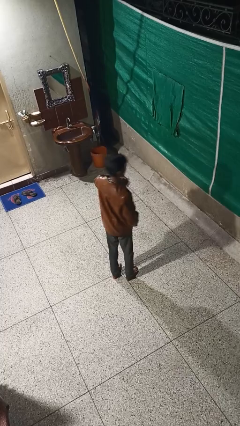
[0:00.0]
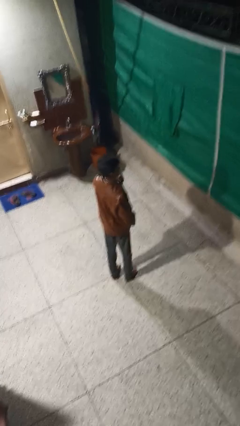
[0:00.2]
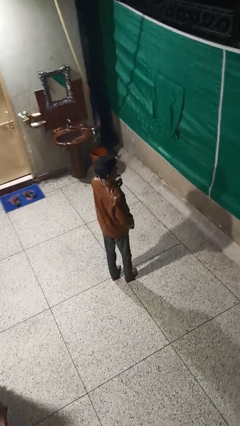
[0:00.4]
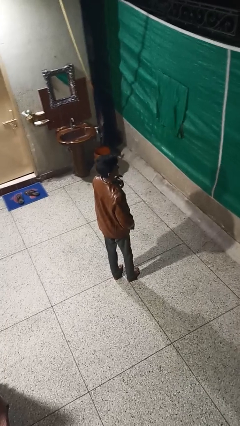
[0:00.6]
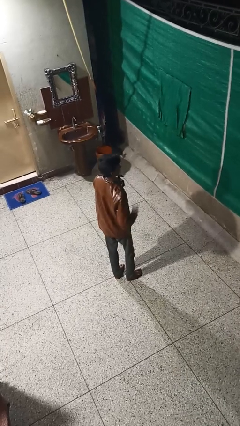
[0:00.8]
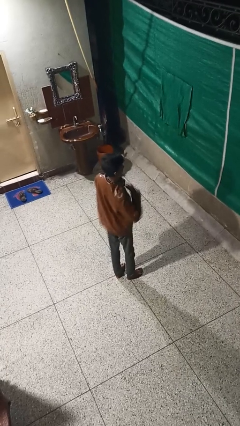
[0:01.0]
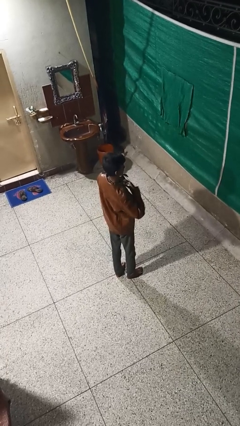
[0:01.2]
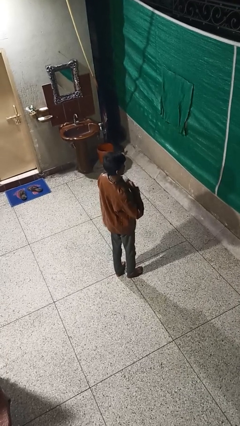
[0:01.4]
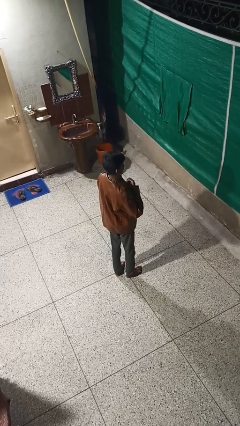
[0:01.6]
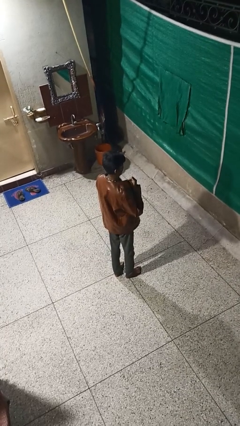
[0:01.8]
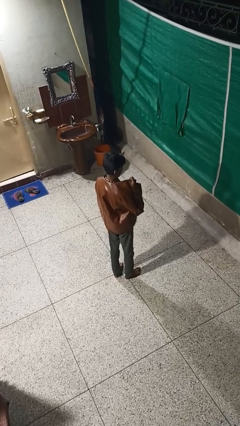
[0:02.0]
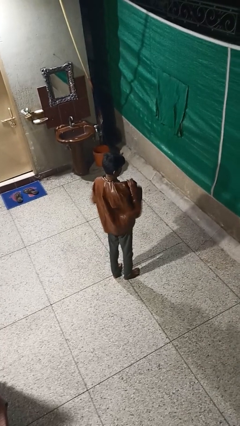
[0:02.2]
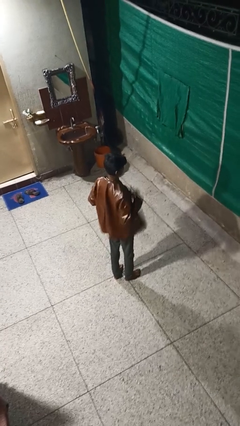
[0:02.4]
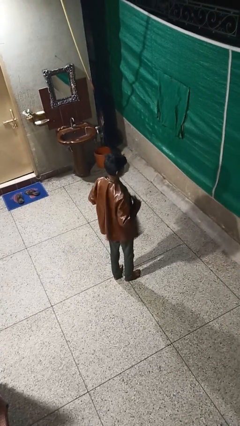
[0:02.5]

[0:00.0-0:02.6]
person unzips jacket

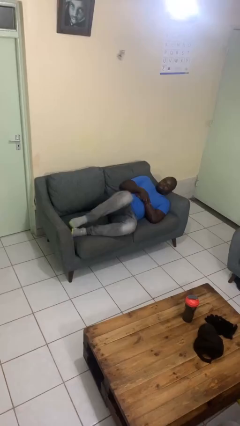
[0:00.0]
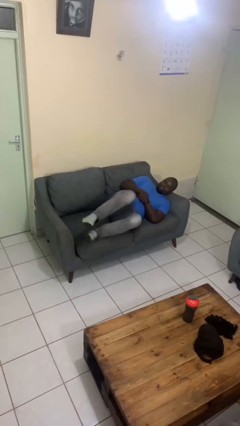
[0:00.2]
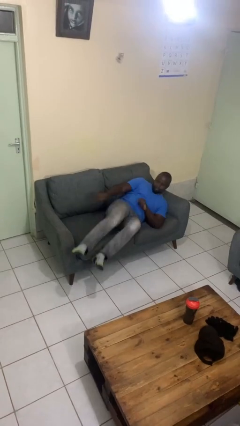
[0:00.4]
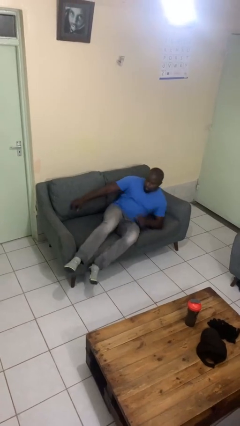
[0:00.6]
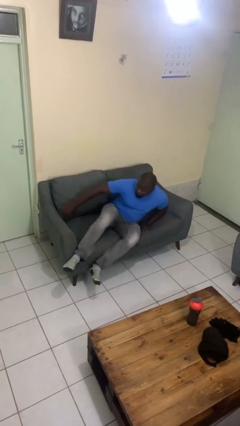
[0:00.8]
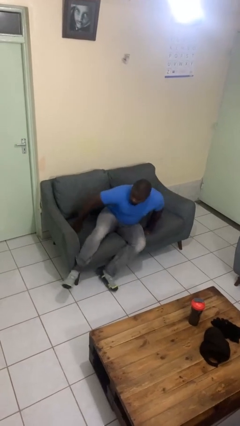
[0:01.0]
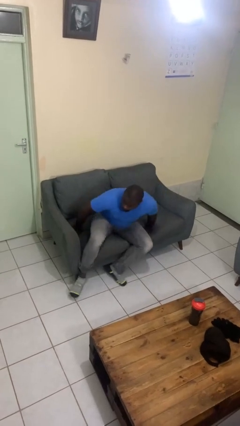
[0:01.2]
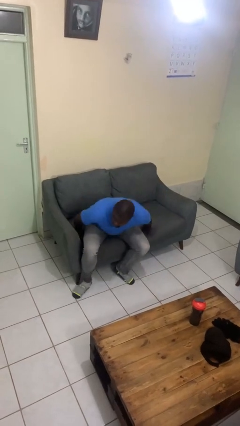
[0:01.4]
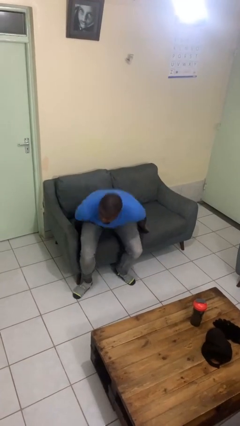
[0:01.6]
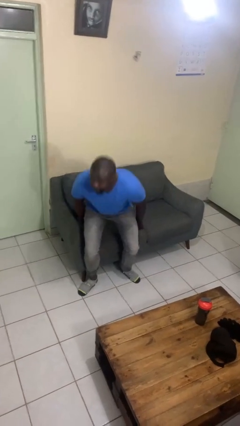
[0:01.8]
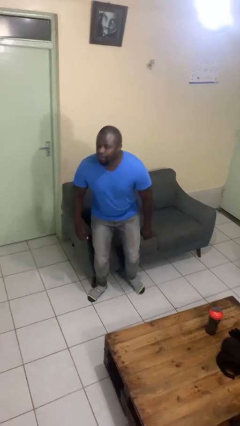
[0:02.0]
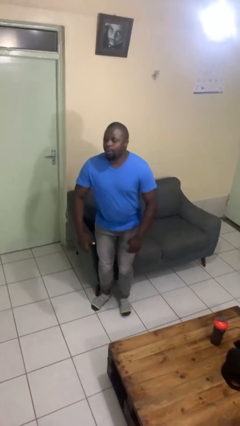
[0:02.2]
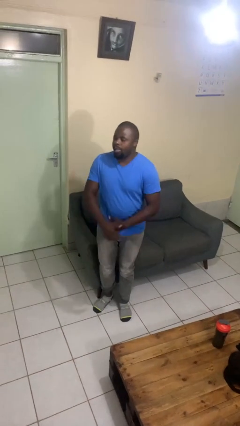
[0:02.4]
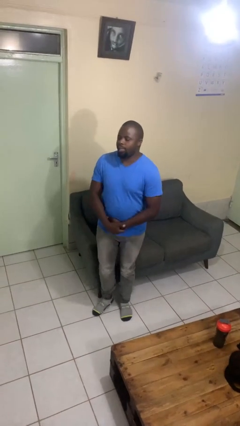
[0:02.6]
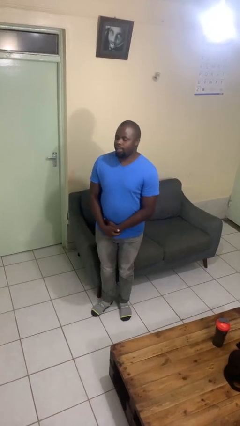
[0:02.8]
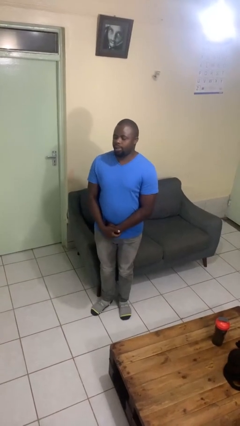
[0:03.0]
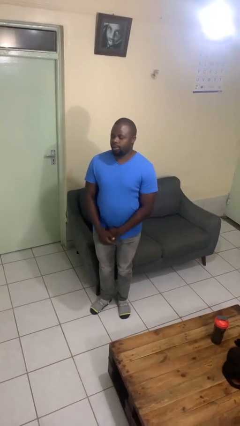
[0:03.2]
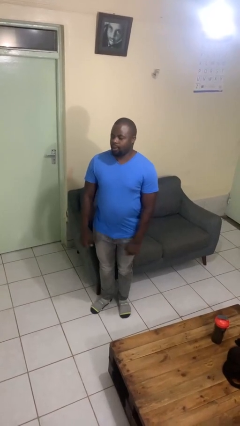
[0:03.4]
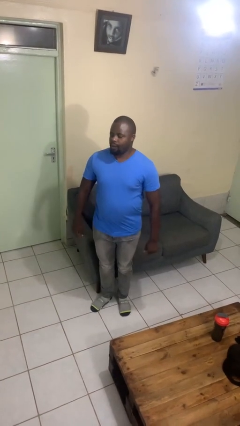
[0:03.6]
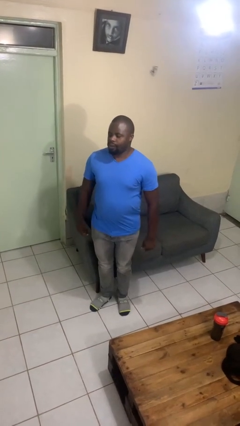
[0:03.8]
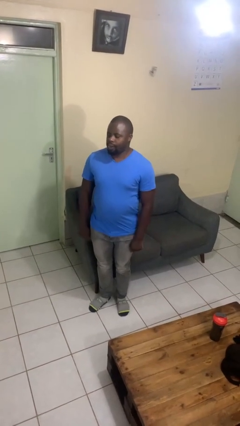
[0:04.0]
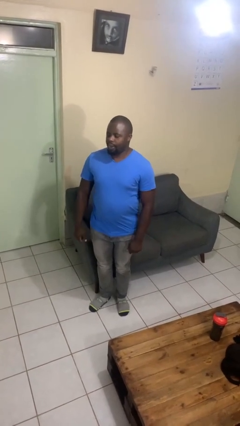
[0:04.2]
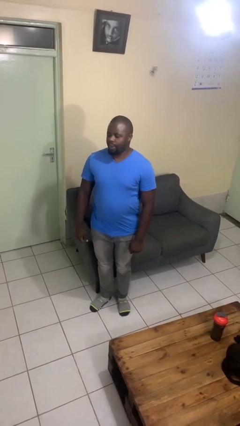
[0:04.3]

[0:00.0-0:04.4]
person stands up

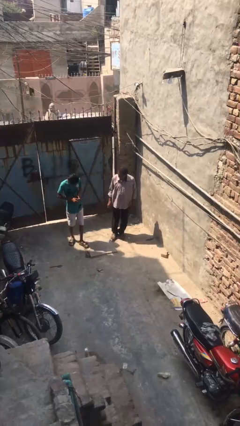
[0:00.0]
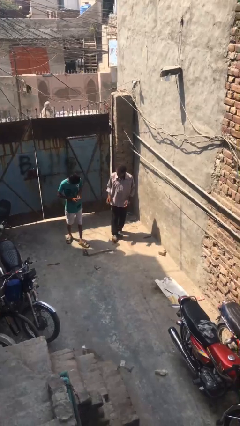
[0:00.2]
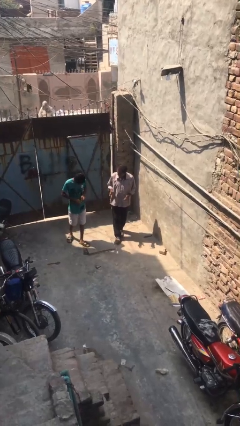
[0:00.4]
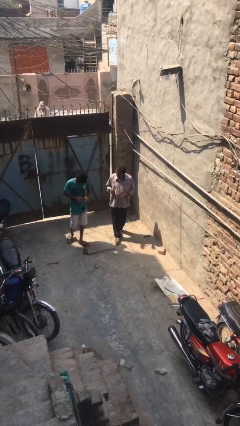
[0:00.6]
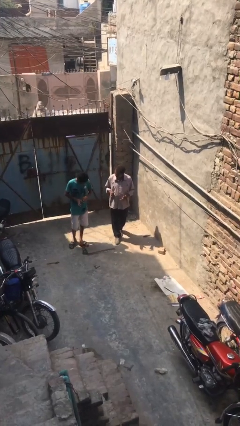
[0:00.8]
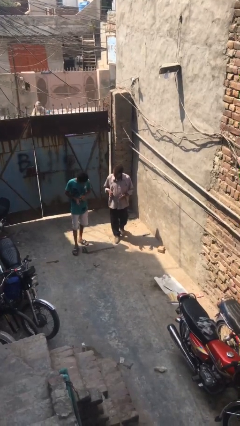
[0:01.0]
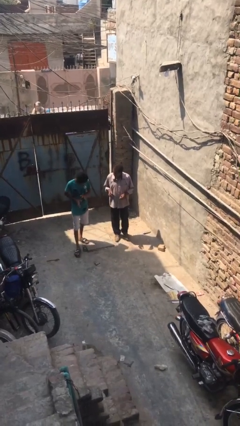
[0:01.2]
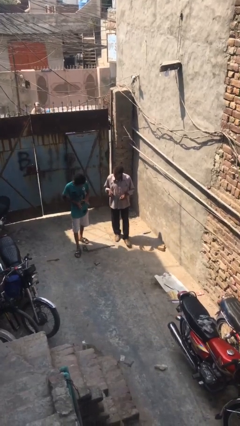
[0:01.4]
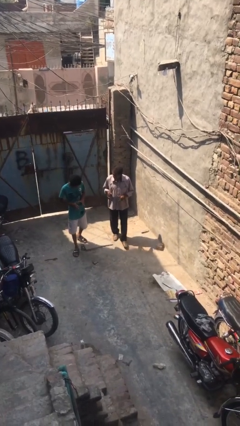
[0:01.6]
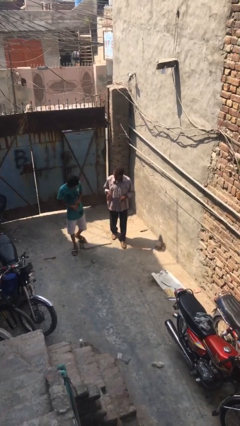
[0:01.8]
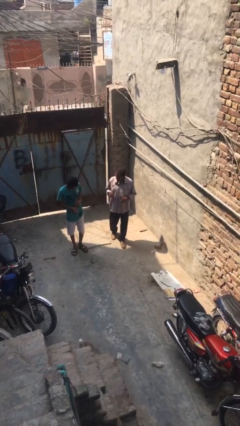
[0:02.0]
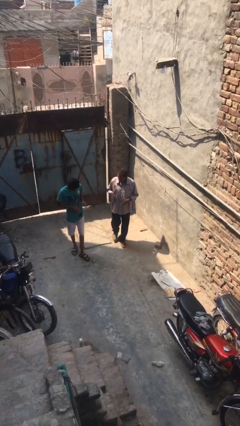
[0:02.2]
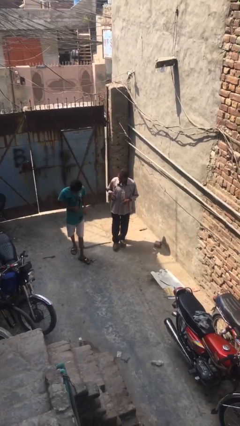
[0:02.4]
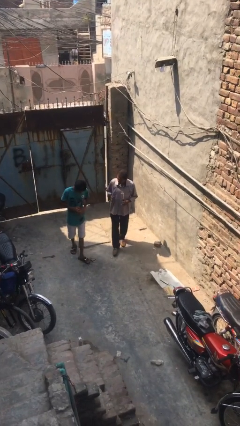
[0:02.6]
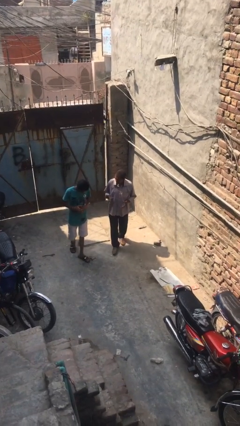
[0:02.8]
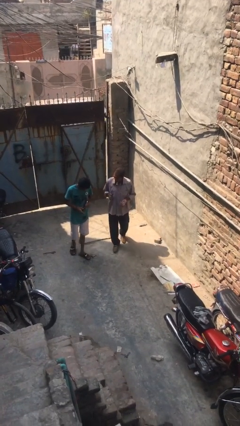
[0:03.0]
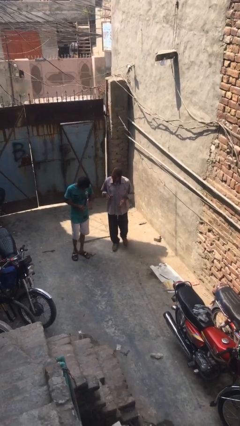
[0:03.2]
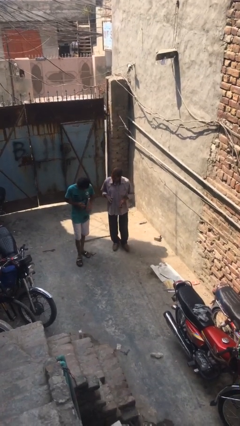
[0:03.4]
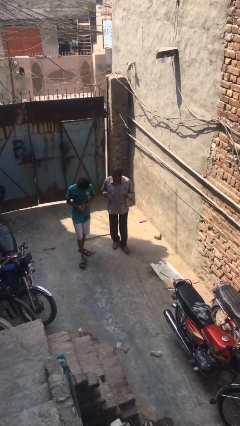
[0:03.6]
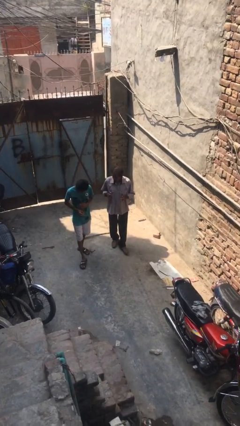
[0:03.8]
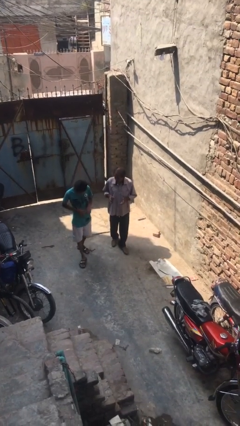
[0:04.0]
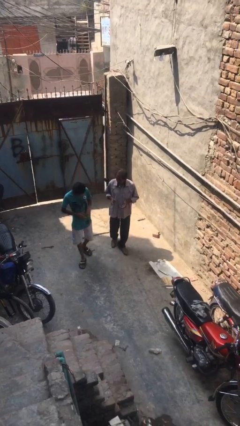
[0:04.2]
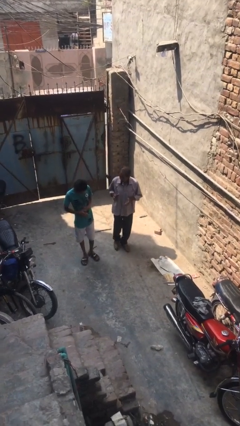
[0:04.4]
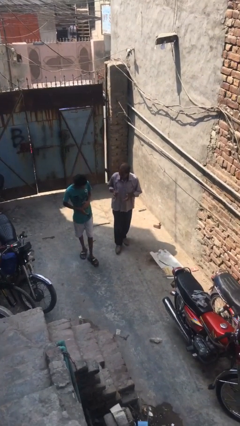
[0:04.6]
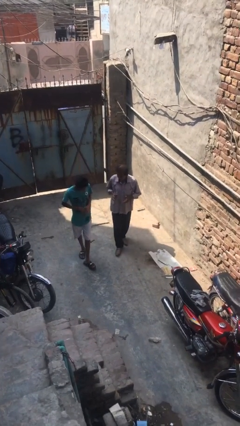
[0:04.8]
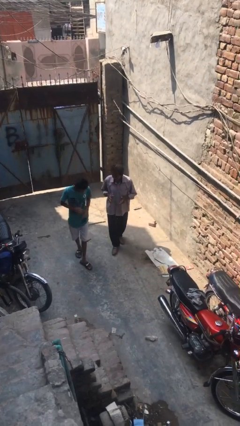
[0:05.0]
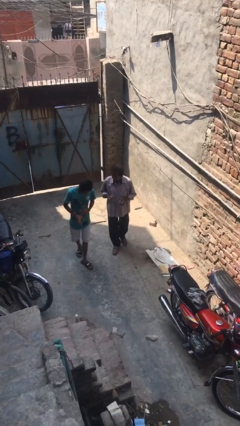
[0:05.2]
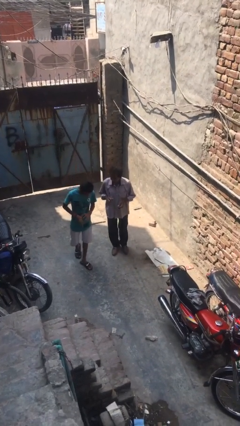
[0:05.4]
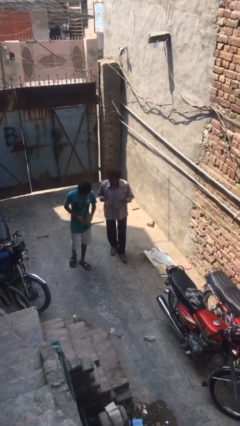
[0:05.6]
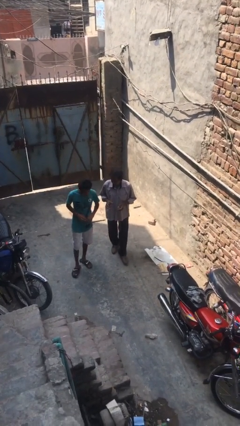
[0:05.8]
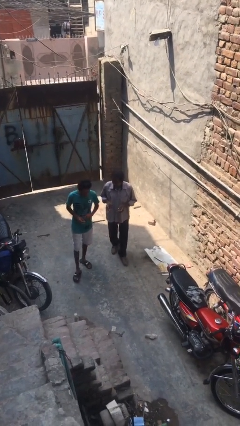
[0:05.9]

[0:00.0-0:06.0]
person talks to person

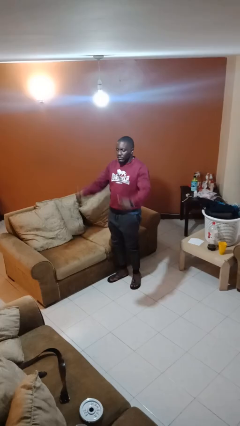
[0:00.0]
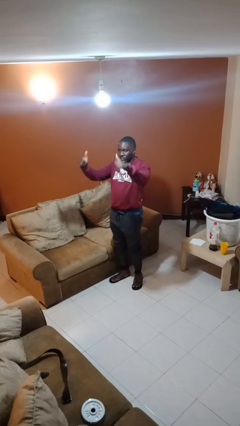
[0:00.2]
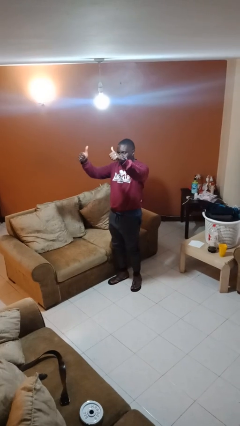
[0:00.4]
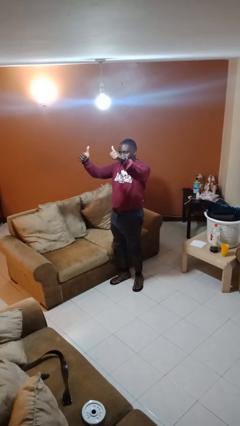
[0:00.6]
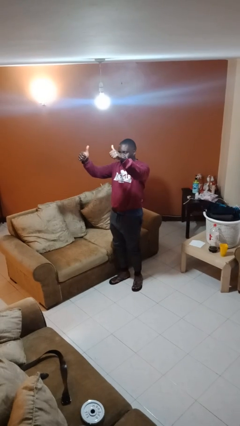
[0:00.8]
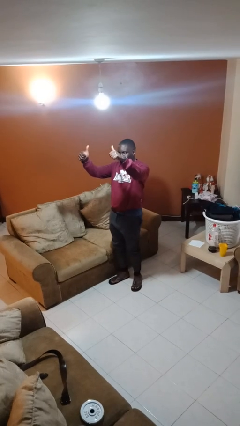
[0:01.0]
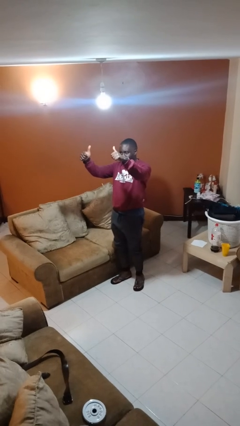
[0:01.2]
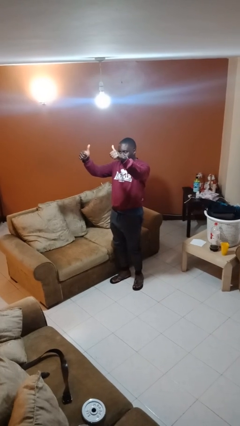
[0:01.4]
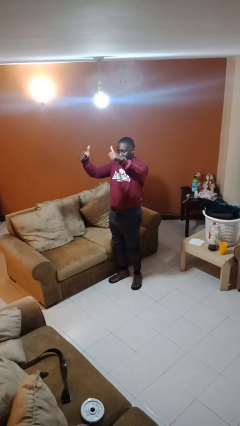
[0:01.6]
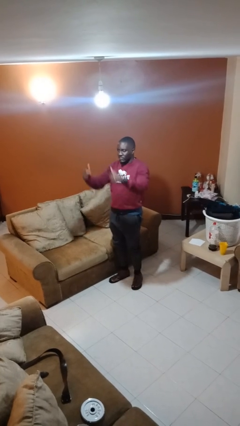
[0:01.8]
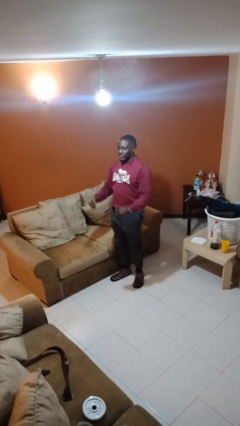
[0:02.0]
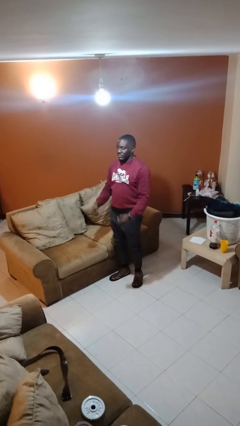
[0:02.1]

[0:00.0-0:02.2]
person gestures thumbs up

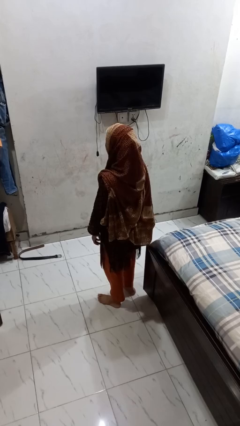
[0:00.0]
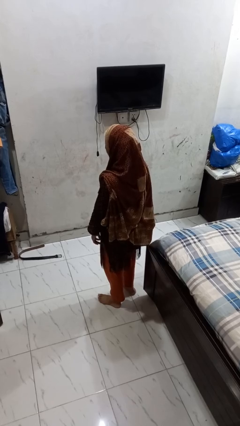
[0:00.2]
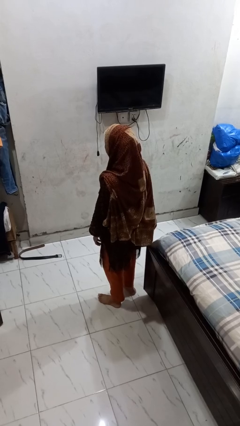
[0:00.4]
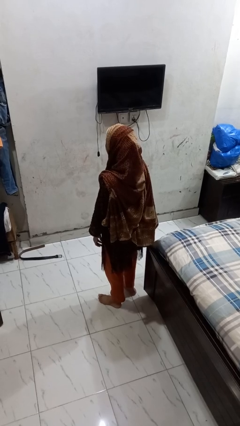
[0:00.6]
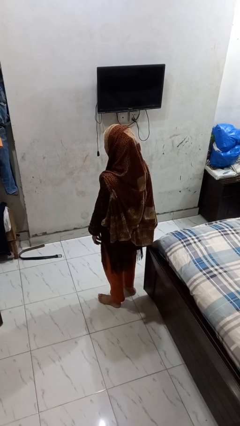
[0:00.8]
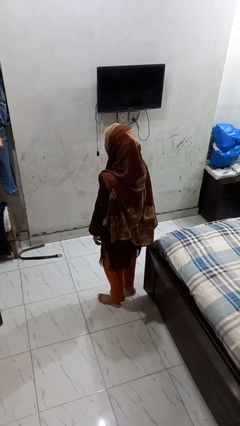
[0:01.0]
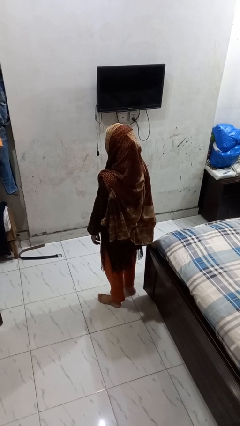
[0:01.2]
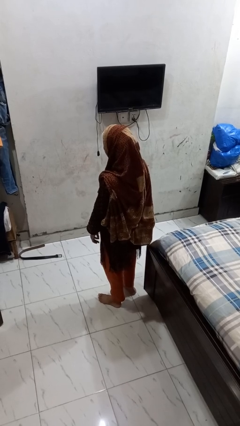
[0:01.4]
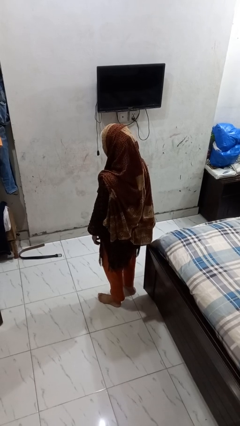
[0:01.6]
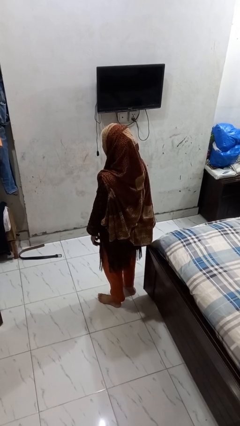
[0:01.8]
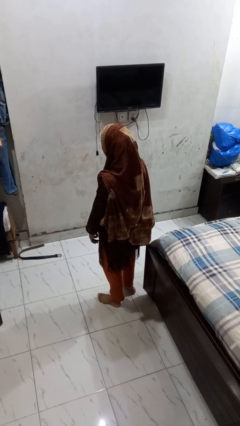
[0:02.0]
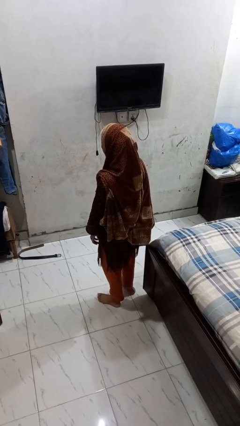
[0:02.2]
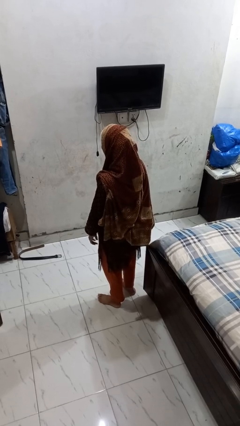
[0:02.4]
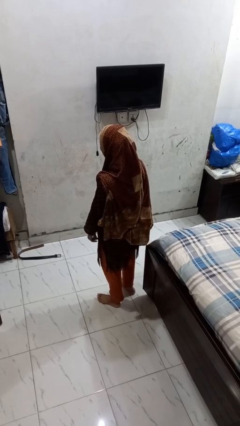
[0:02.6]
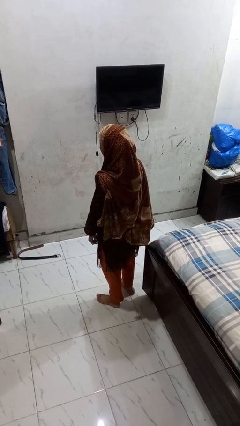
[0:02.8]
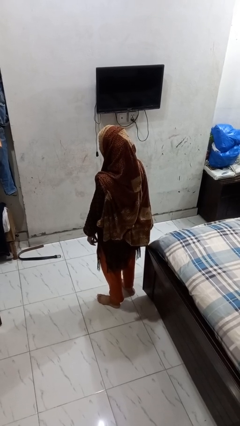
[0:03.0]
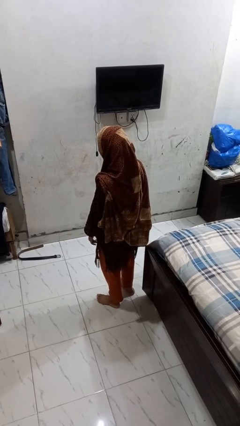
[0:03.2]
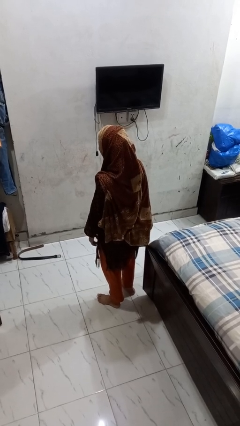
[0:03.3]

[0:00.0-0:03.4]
person nods head
